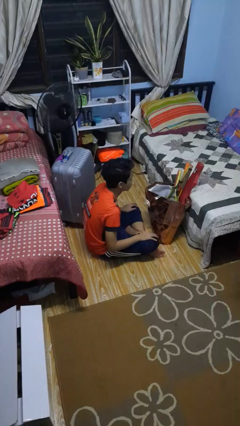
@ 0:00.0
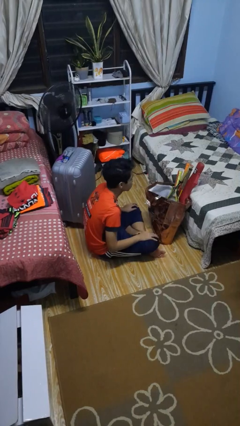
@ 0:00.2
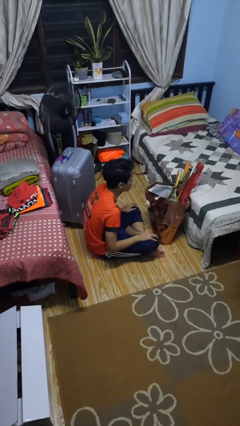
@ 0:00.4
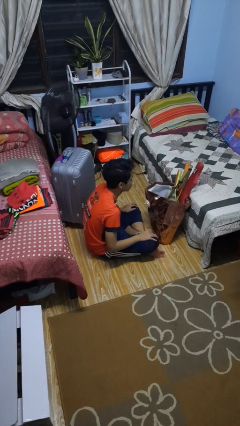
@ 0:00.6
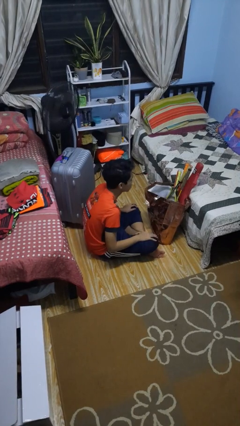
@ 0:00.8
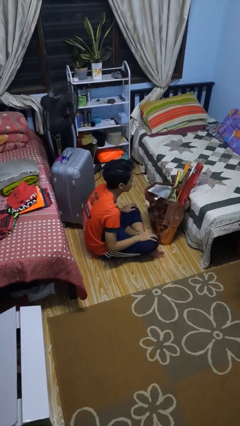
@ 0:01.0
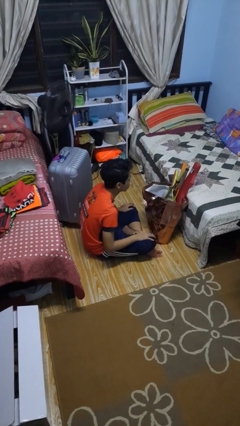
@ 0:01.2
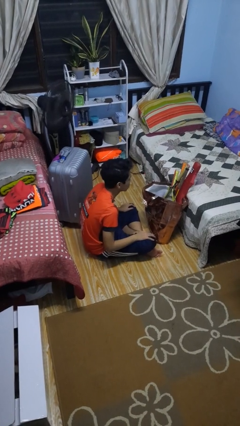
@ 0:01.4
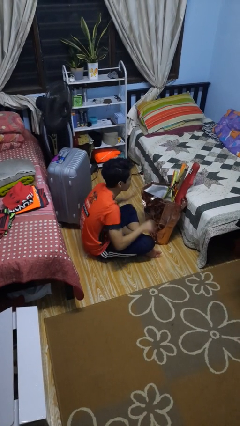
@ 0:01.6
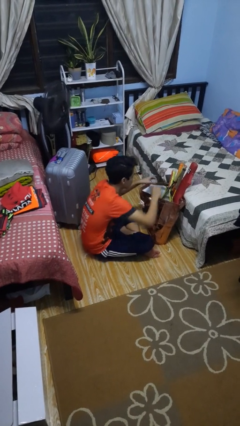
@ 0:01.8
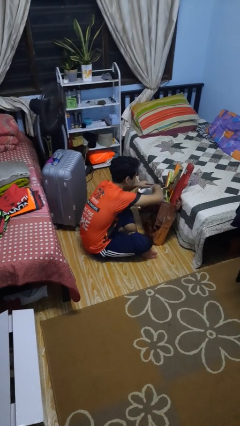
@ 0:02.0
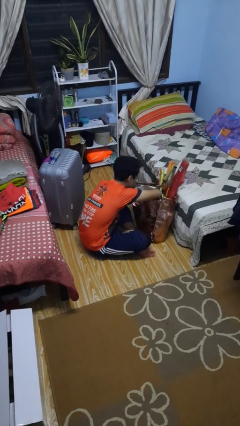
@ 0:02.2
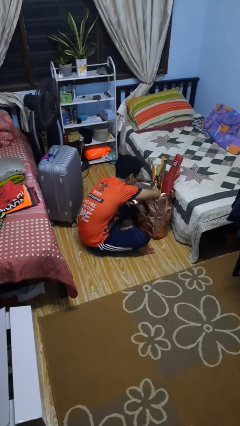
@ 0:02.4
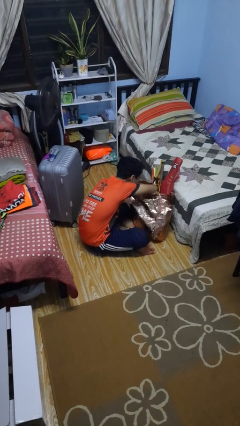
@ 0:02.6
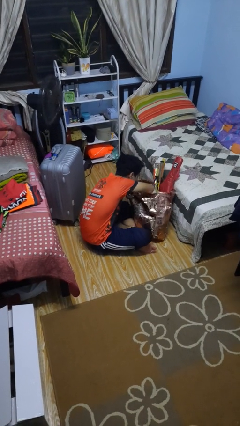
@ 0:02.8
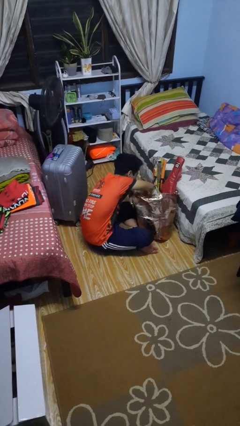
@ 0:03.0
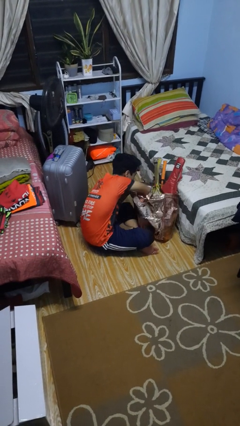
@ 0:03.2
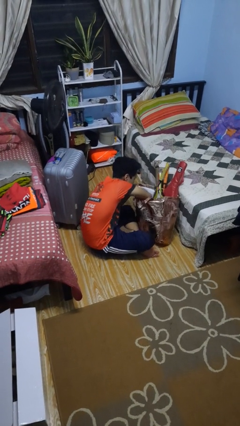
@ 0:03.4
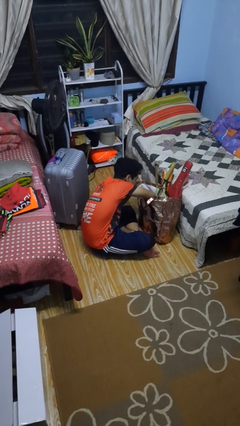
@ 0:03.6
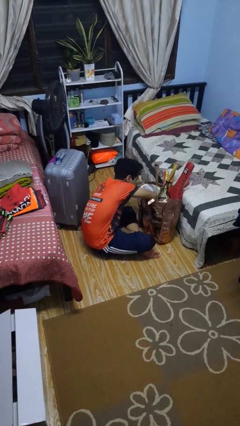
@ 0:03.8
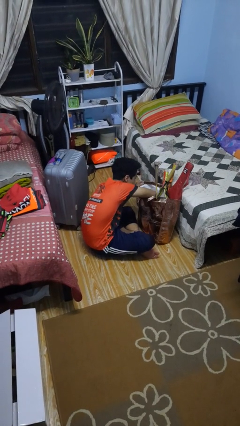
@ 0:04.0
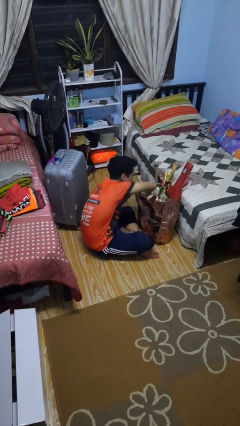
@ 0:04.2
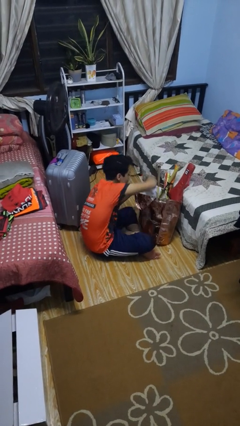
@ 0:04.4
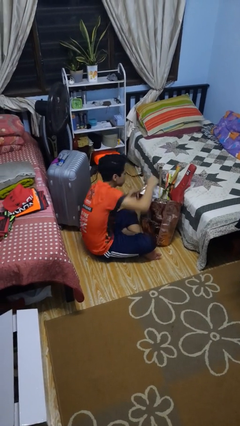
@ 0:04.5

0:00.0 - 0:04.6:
person searches in bag

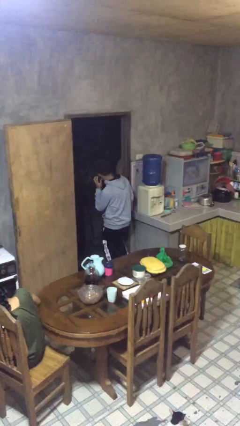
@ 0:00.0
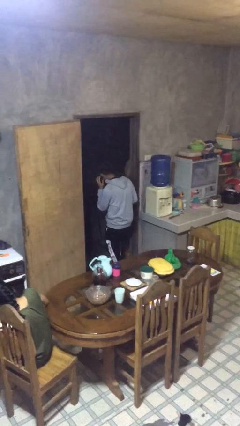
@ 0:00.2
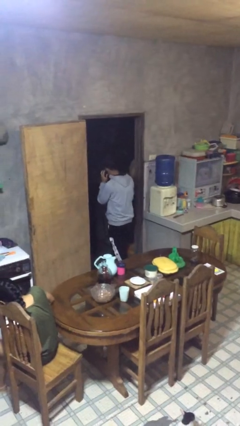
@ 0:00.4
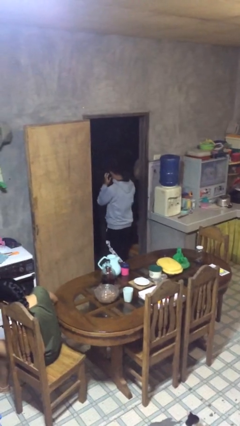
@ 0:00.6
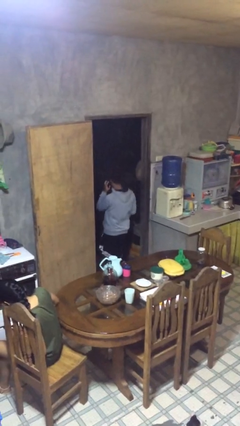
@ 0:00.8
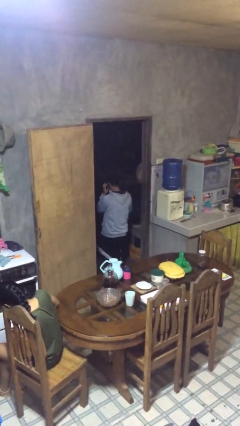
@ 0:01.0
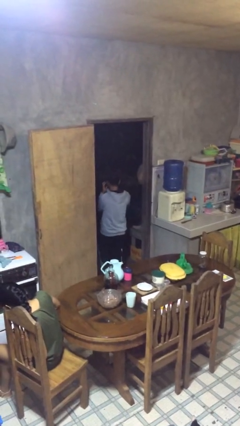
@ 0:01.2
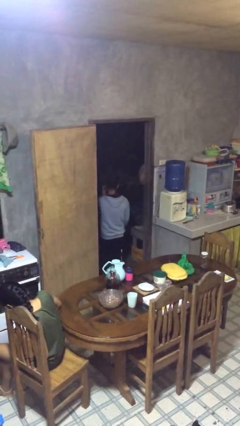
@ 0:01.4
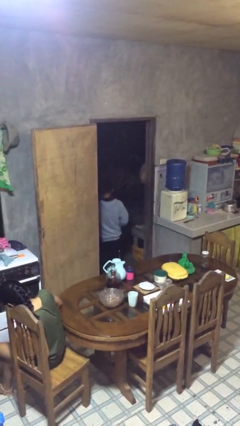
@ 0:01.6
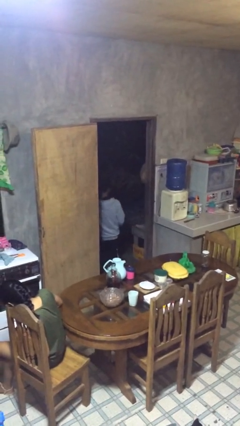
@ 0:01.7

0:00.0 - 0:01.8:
person exits scene through structure

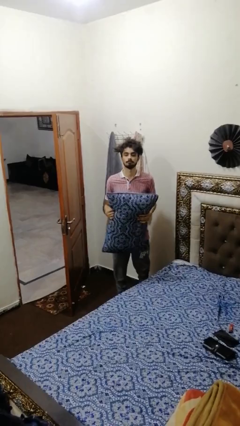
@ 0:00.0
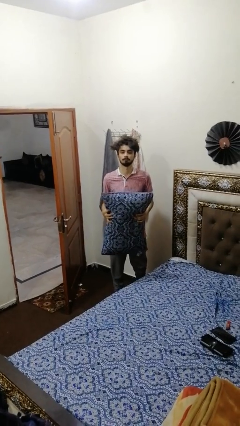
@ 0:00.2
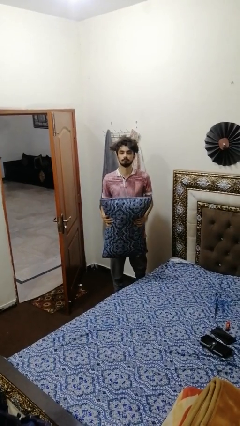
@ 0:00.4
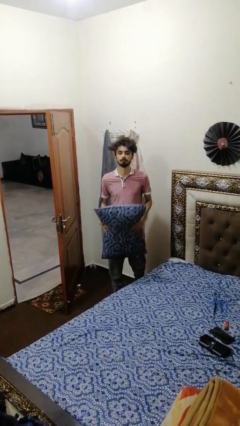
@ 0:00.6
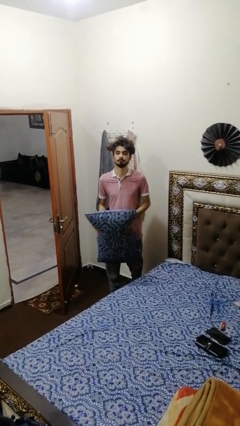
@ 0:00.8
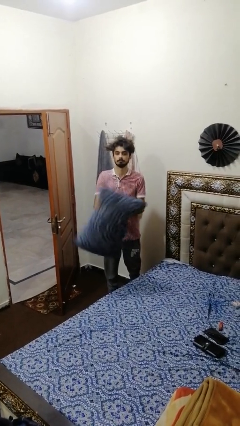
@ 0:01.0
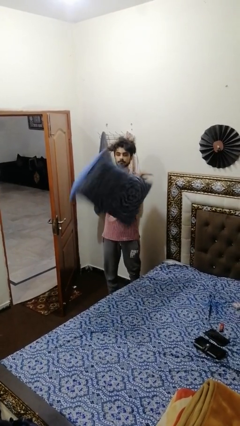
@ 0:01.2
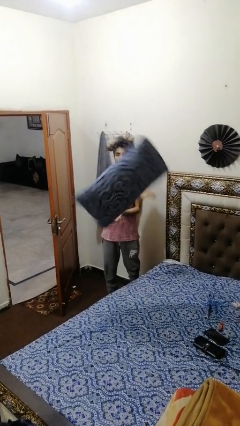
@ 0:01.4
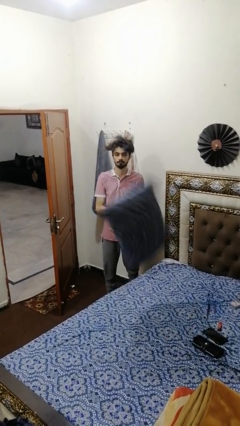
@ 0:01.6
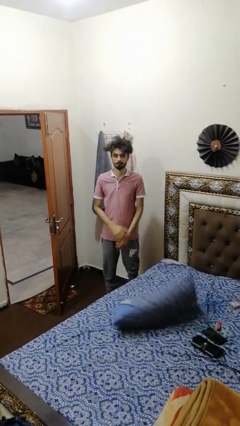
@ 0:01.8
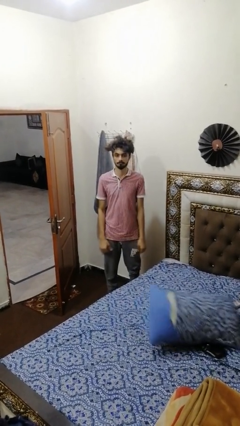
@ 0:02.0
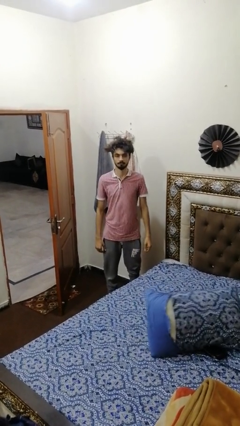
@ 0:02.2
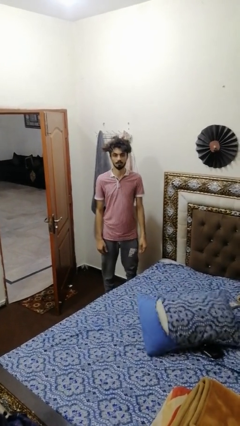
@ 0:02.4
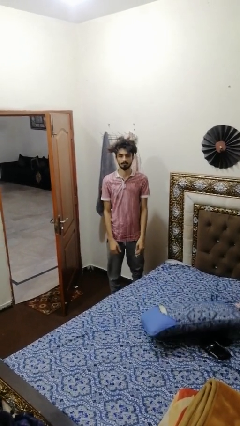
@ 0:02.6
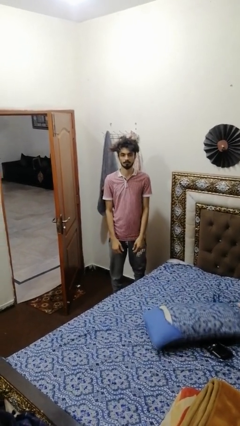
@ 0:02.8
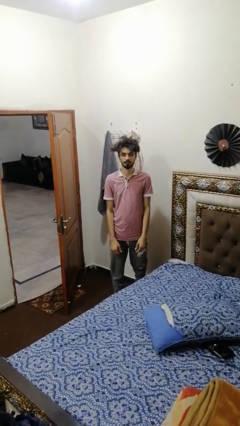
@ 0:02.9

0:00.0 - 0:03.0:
person throws object on bed

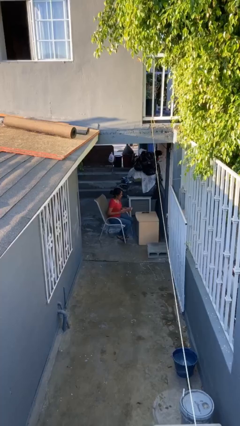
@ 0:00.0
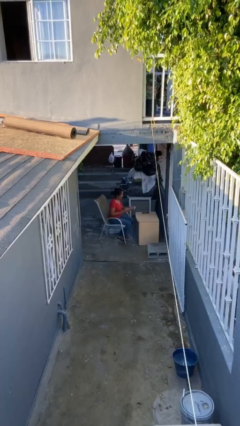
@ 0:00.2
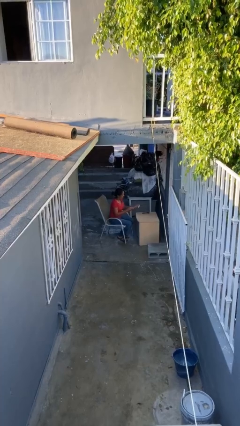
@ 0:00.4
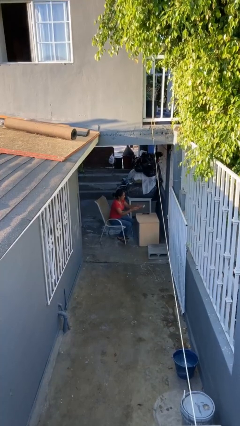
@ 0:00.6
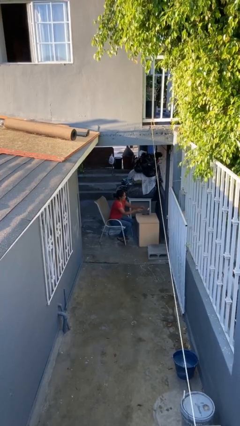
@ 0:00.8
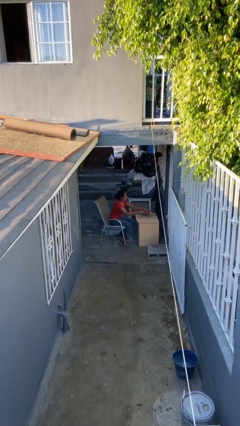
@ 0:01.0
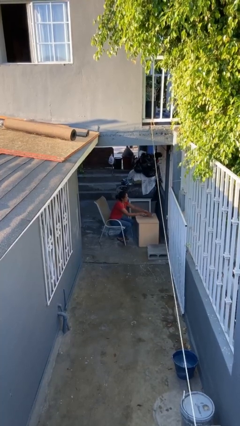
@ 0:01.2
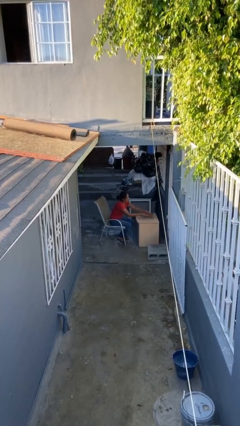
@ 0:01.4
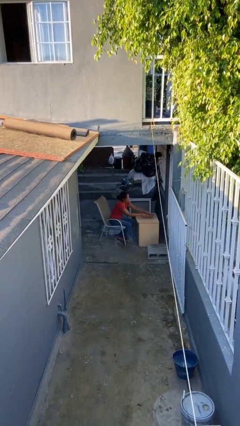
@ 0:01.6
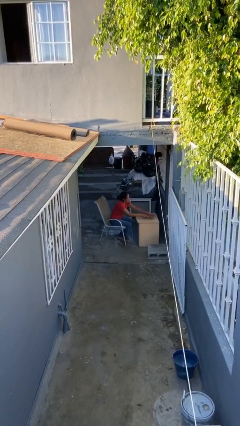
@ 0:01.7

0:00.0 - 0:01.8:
person puts down object on table

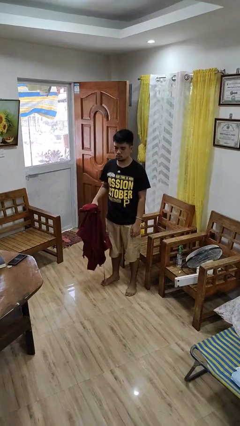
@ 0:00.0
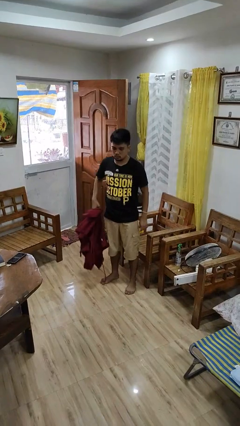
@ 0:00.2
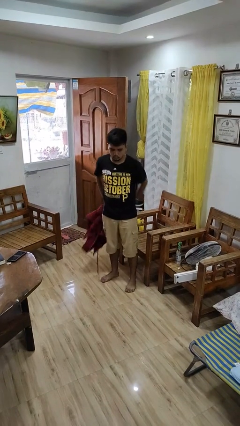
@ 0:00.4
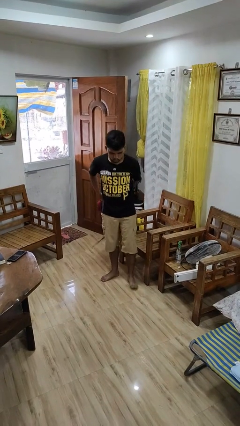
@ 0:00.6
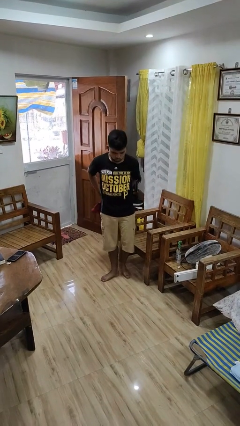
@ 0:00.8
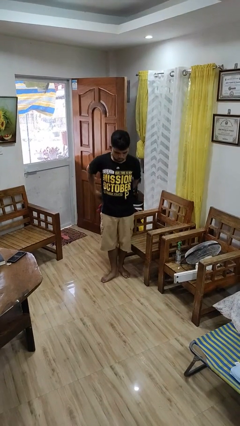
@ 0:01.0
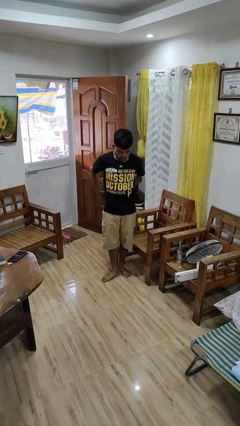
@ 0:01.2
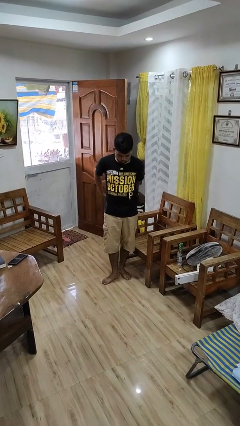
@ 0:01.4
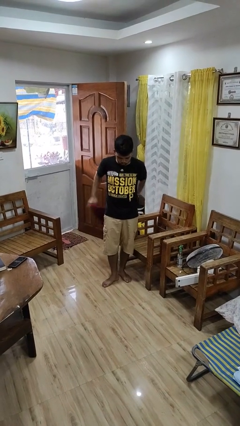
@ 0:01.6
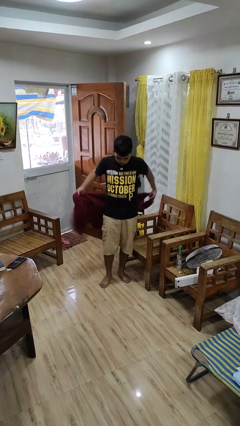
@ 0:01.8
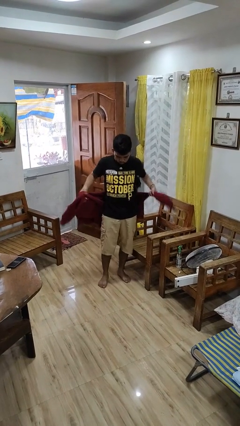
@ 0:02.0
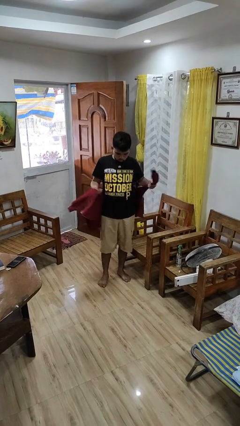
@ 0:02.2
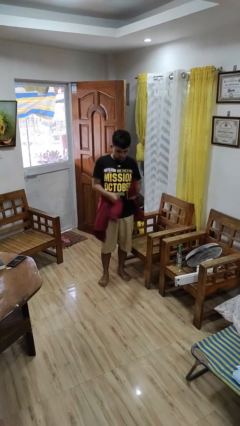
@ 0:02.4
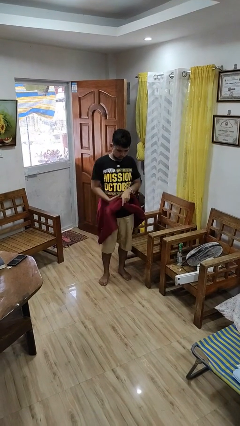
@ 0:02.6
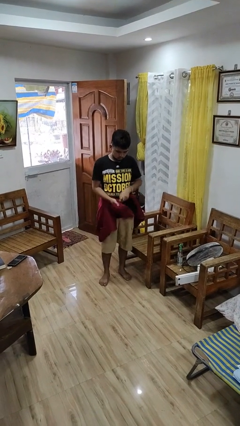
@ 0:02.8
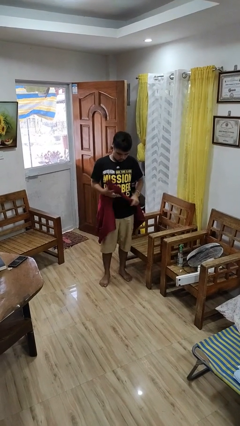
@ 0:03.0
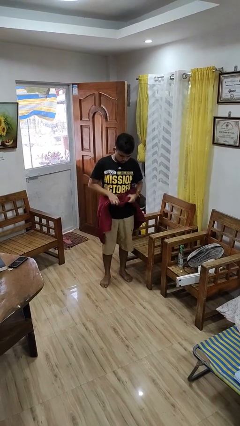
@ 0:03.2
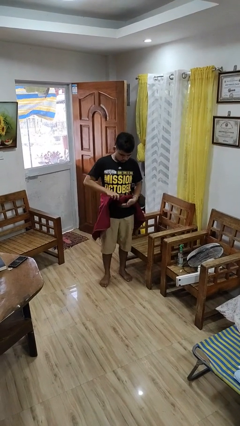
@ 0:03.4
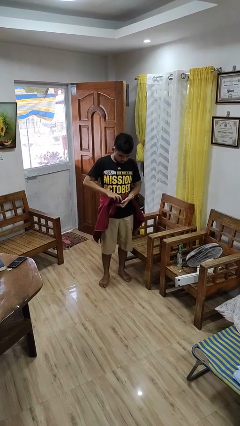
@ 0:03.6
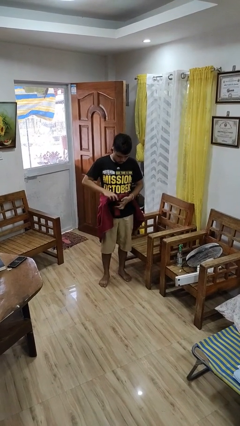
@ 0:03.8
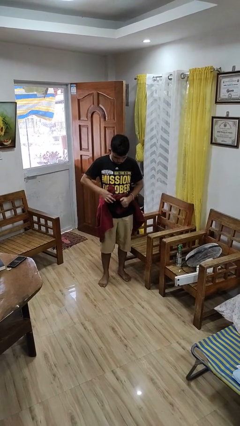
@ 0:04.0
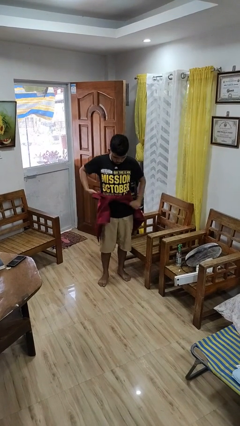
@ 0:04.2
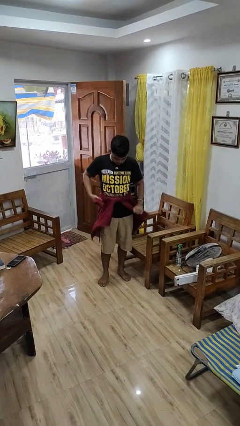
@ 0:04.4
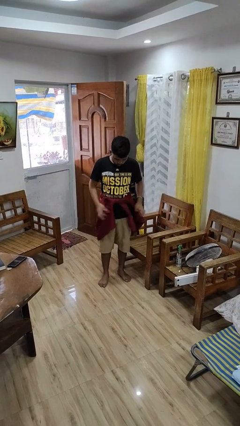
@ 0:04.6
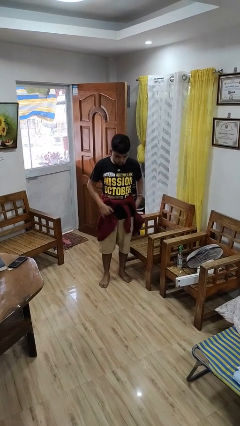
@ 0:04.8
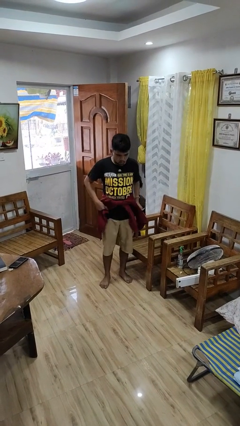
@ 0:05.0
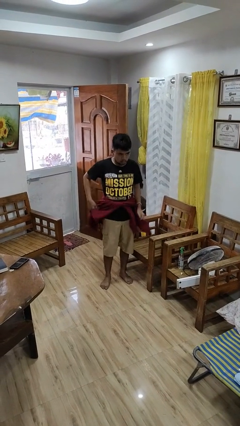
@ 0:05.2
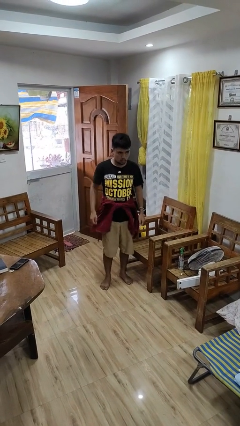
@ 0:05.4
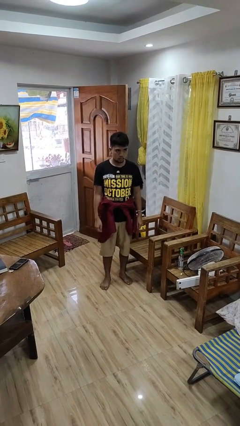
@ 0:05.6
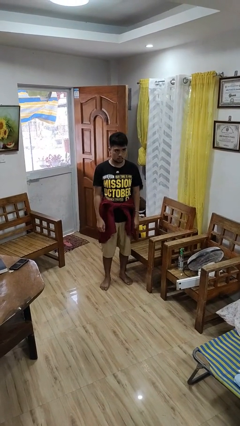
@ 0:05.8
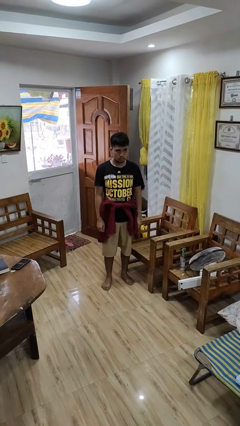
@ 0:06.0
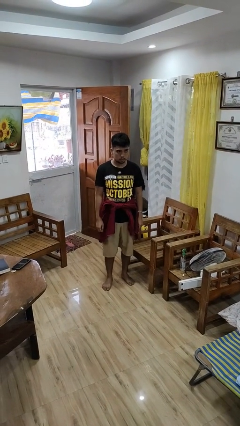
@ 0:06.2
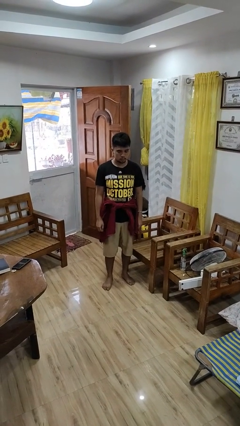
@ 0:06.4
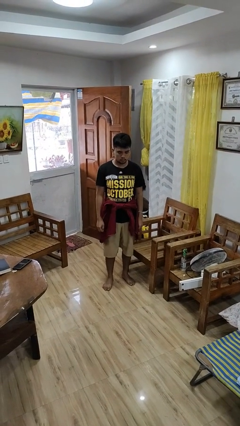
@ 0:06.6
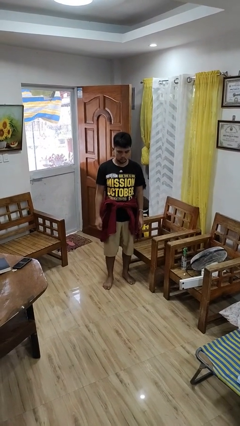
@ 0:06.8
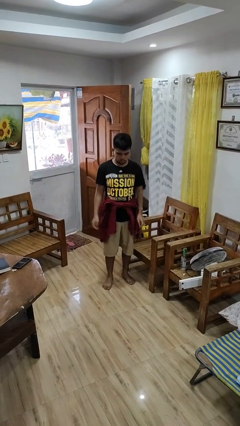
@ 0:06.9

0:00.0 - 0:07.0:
person ties jacket around waist
